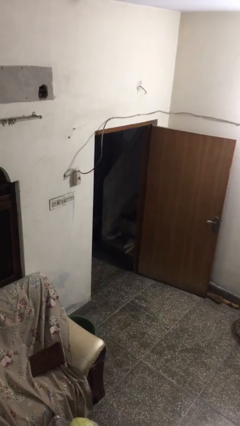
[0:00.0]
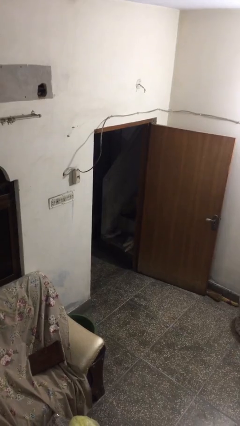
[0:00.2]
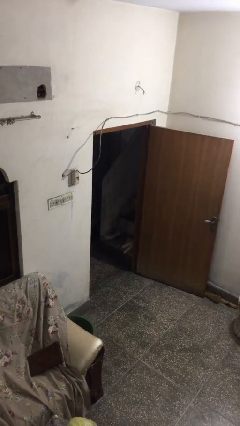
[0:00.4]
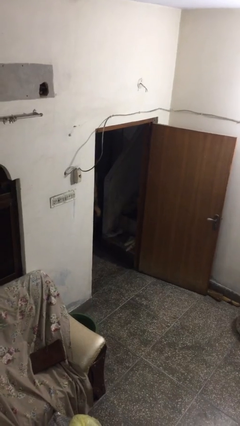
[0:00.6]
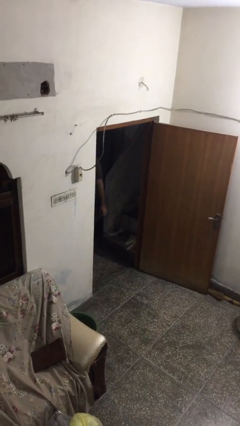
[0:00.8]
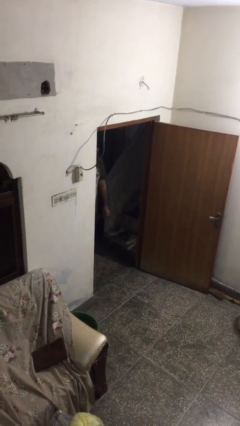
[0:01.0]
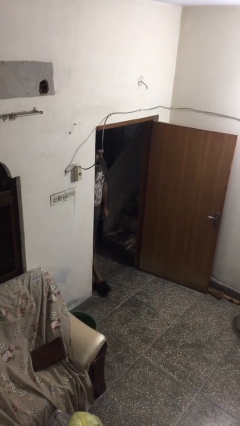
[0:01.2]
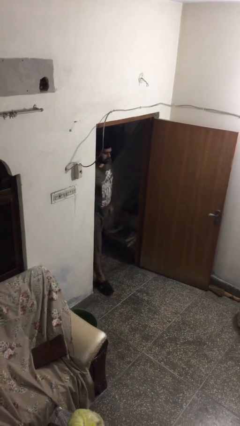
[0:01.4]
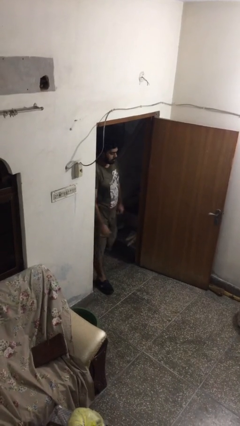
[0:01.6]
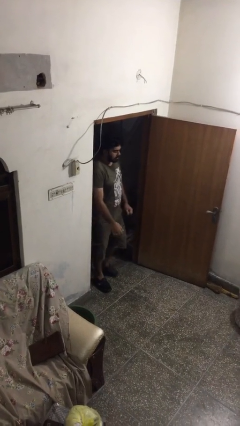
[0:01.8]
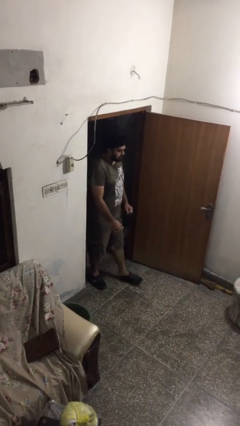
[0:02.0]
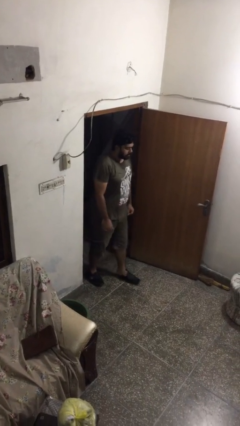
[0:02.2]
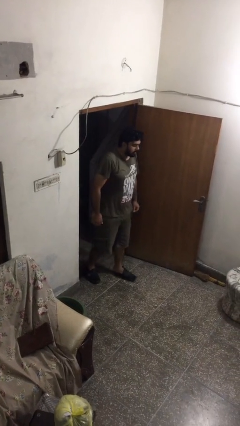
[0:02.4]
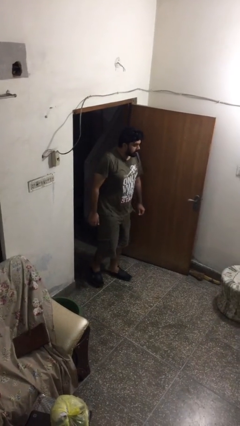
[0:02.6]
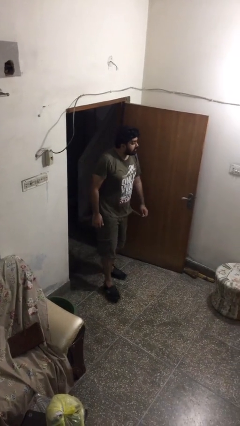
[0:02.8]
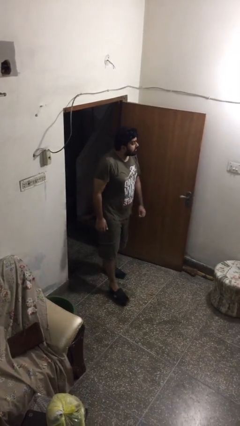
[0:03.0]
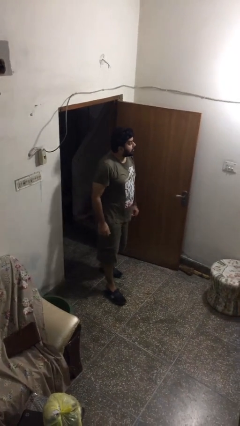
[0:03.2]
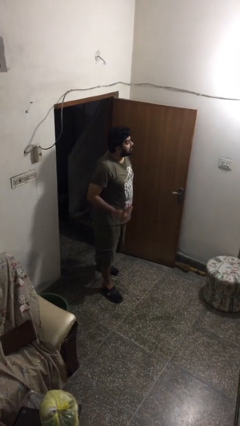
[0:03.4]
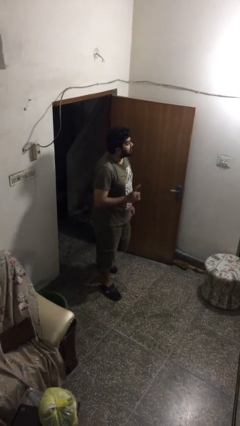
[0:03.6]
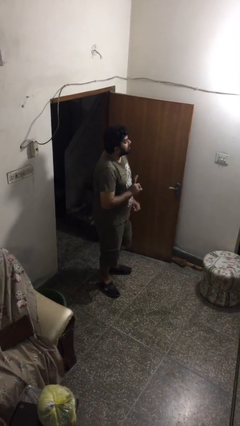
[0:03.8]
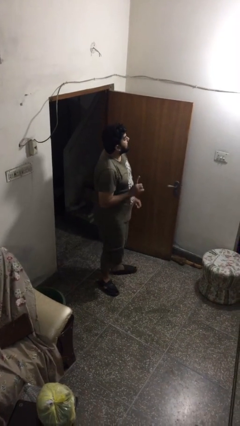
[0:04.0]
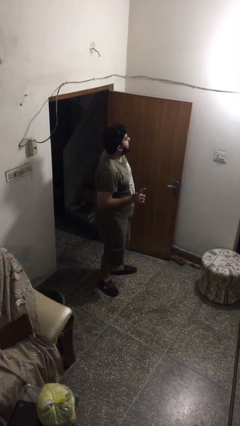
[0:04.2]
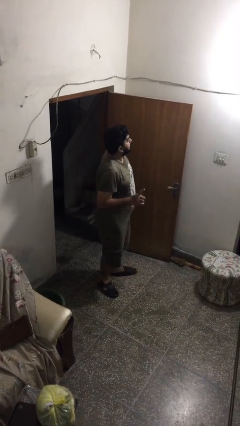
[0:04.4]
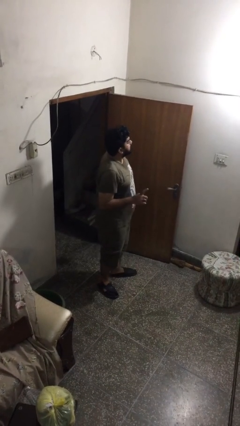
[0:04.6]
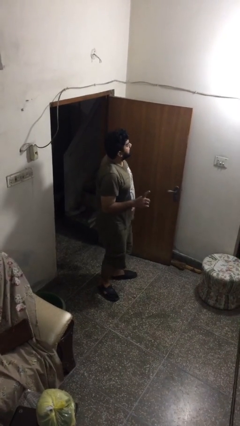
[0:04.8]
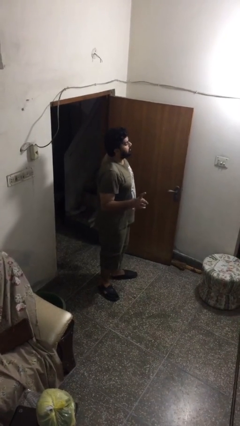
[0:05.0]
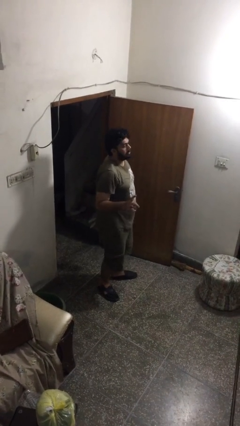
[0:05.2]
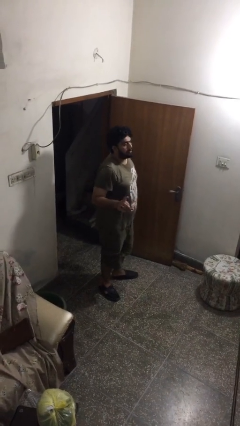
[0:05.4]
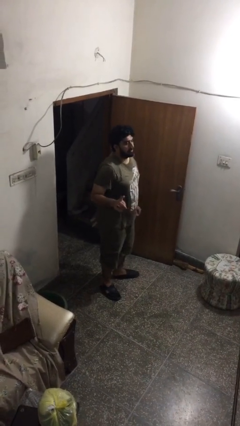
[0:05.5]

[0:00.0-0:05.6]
person enters scene through structure

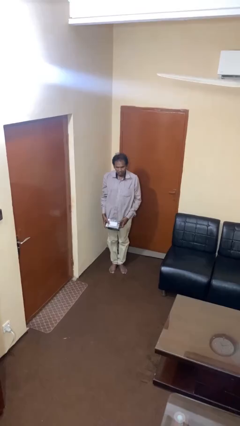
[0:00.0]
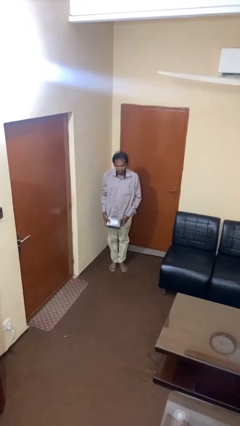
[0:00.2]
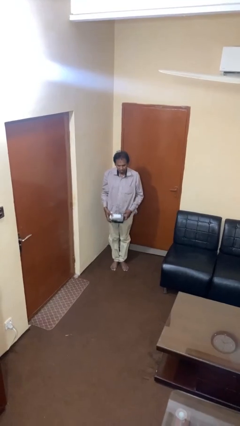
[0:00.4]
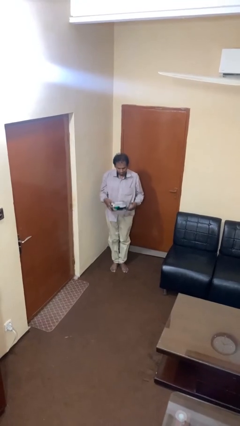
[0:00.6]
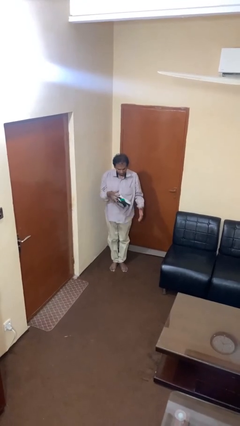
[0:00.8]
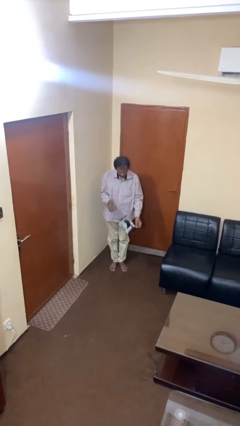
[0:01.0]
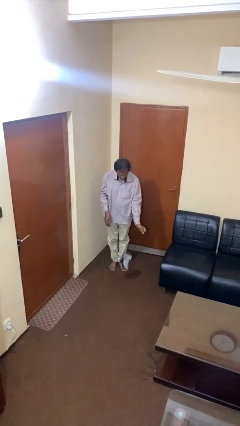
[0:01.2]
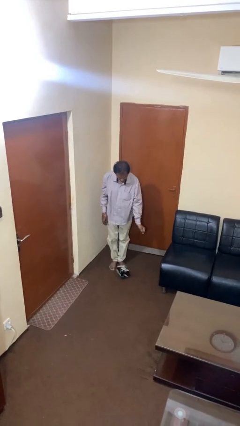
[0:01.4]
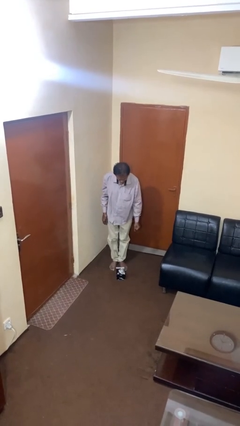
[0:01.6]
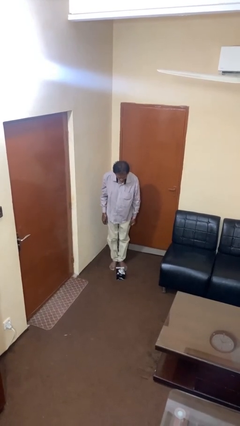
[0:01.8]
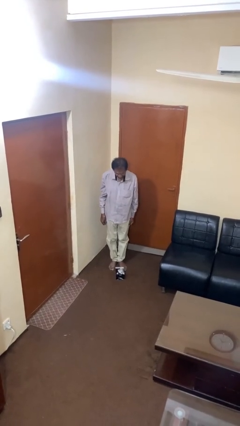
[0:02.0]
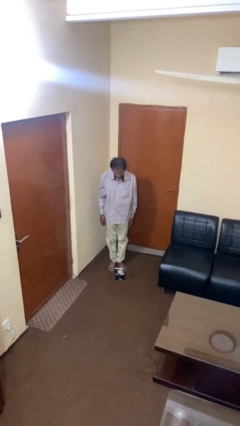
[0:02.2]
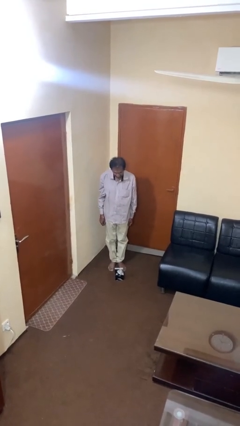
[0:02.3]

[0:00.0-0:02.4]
person drops object

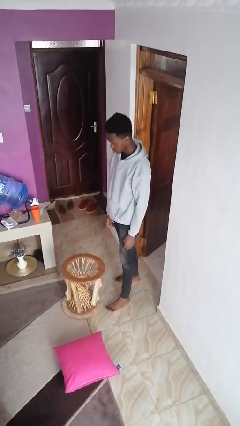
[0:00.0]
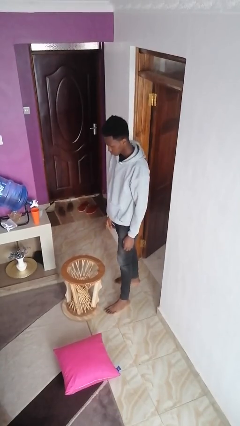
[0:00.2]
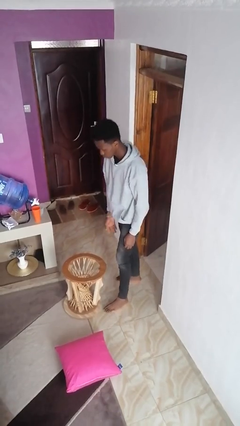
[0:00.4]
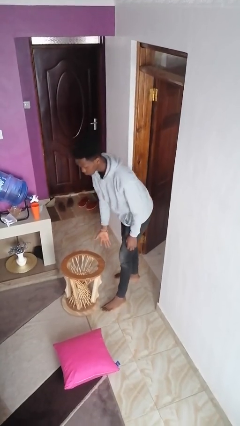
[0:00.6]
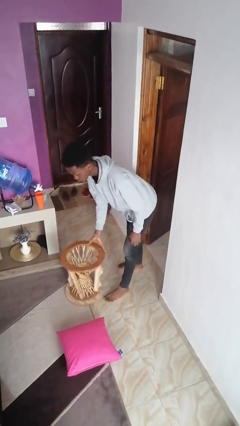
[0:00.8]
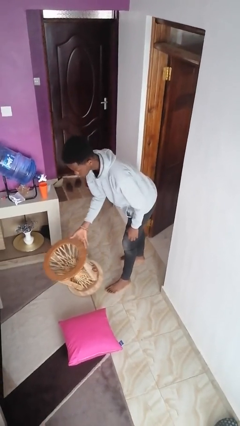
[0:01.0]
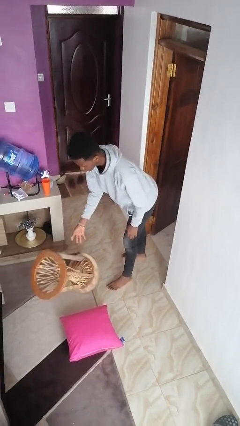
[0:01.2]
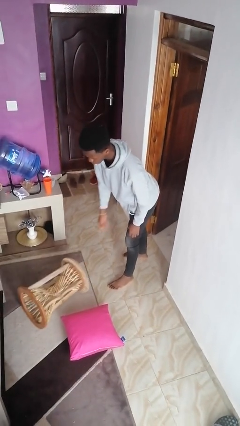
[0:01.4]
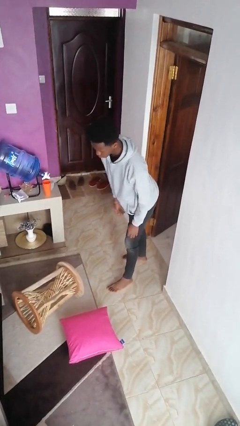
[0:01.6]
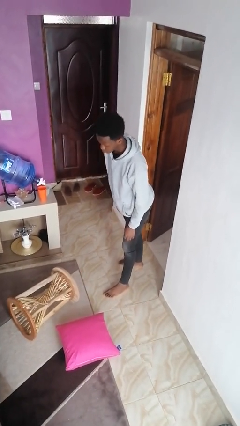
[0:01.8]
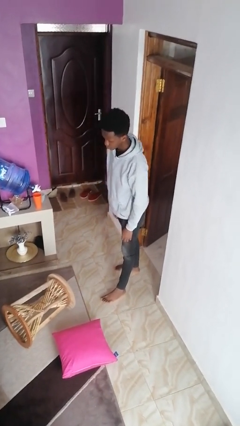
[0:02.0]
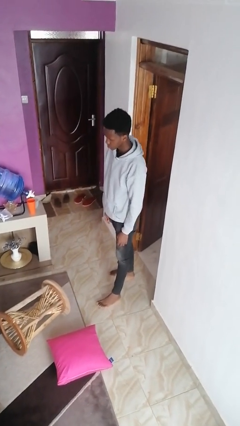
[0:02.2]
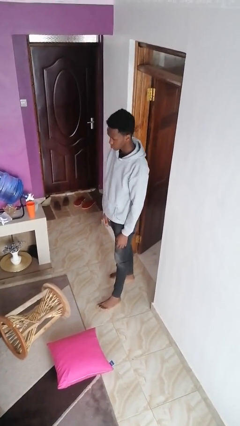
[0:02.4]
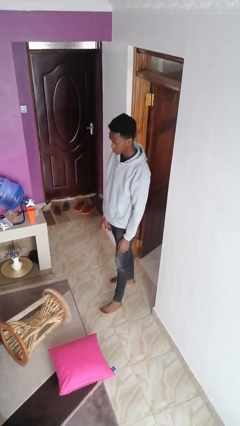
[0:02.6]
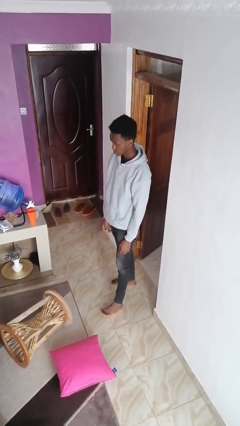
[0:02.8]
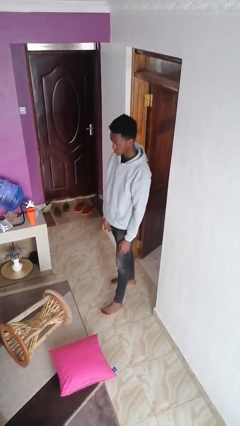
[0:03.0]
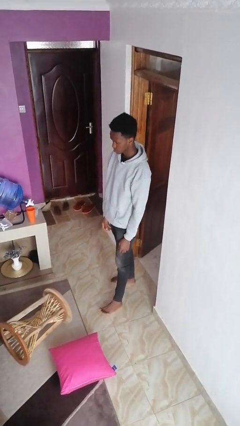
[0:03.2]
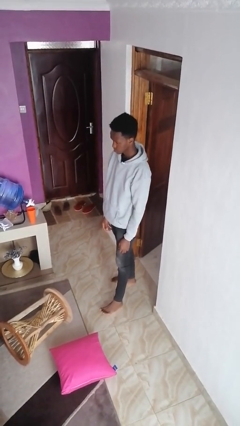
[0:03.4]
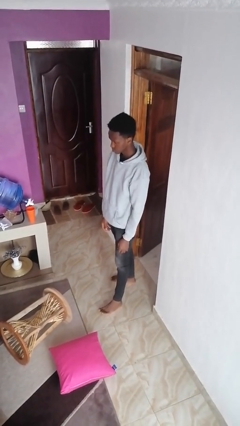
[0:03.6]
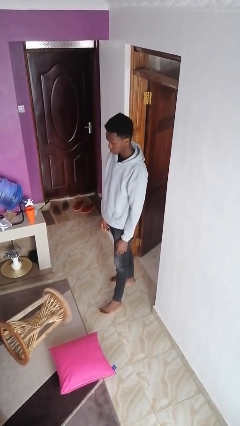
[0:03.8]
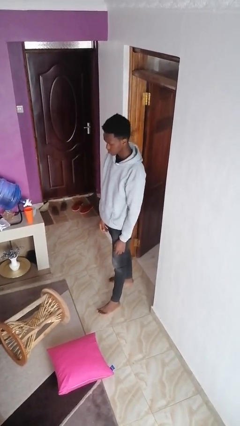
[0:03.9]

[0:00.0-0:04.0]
person knocks over furniture

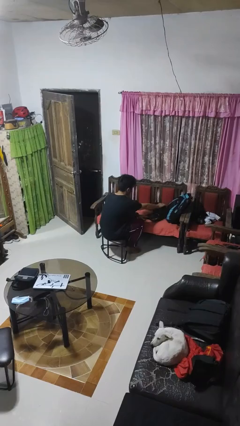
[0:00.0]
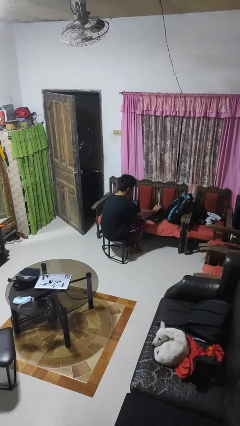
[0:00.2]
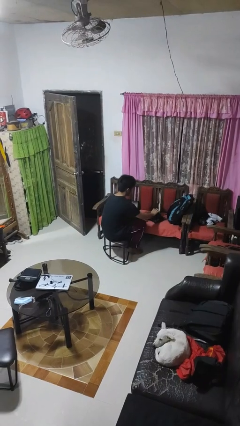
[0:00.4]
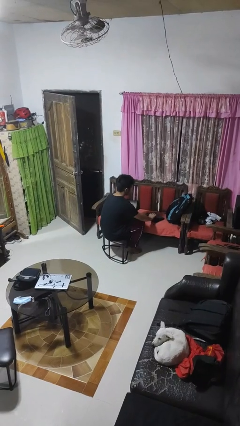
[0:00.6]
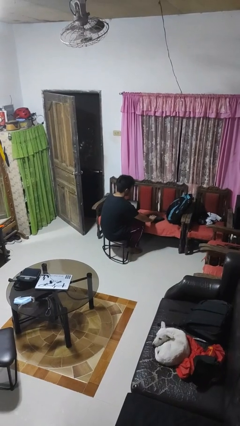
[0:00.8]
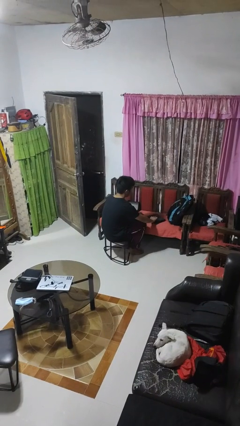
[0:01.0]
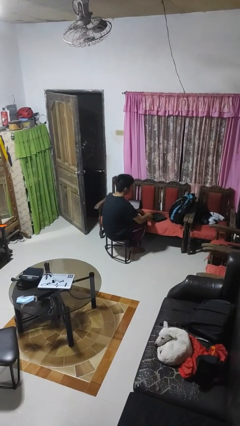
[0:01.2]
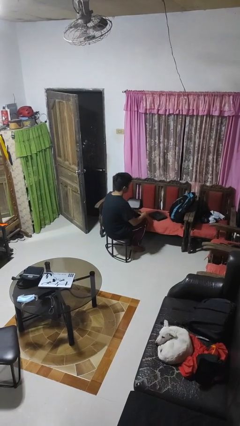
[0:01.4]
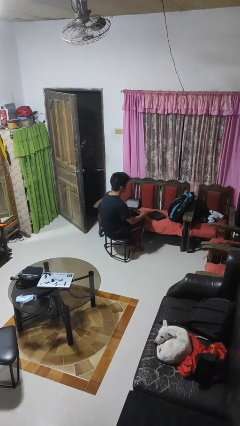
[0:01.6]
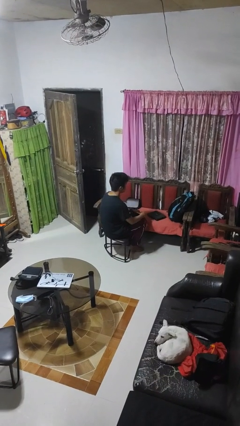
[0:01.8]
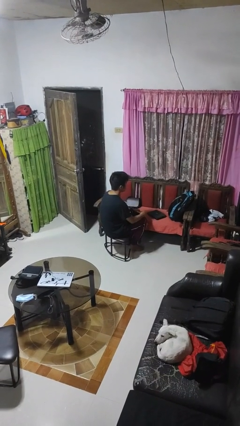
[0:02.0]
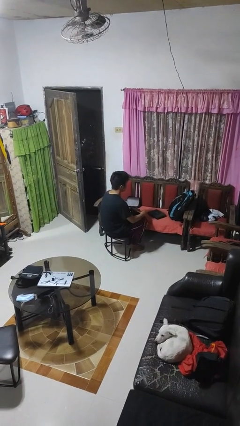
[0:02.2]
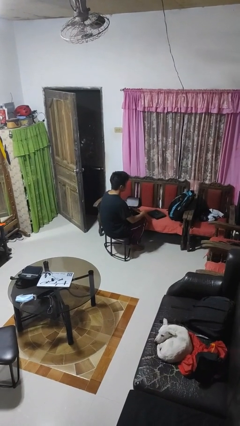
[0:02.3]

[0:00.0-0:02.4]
person closes laptop

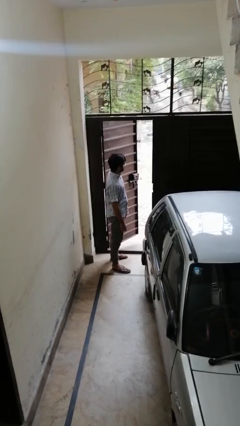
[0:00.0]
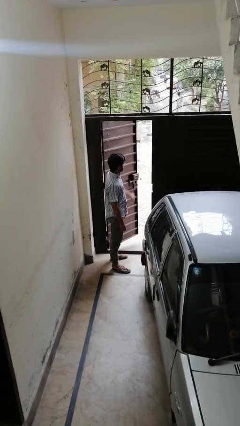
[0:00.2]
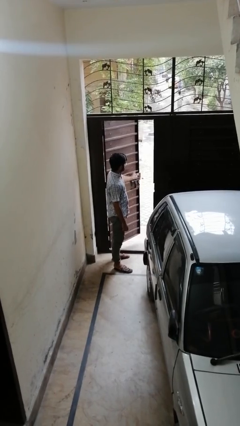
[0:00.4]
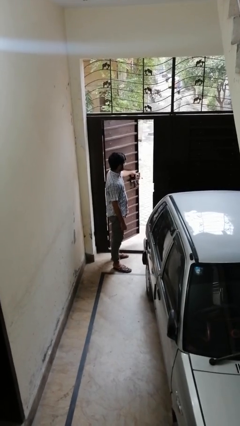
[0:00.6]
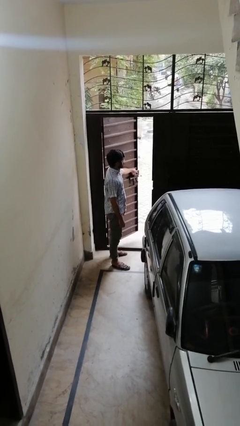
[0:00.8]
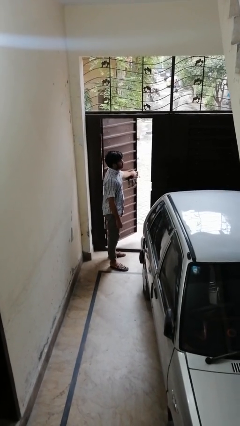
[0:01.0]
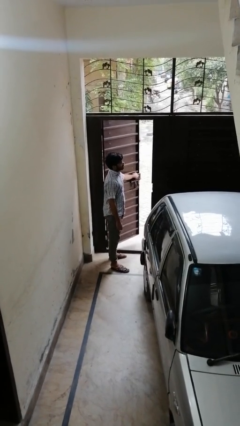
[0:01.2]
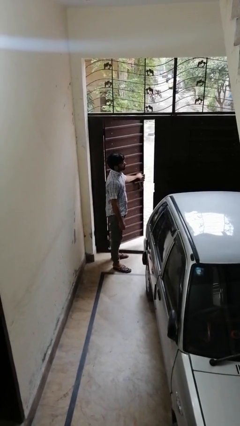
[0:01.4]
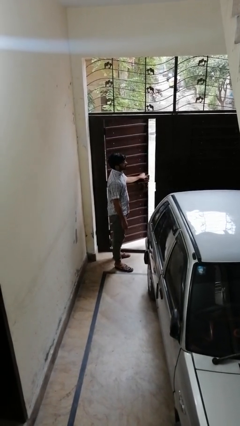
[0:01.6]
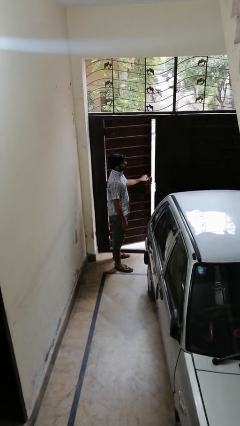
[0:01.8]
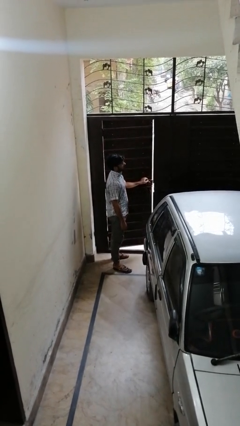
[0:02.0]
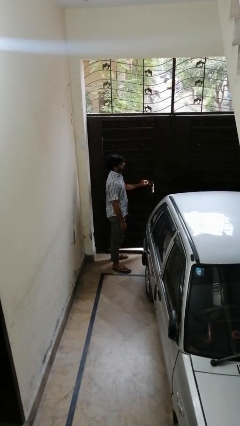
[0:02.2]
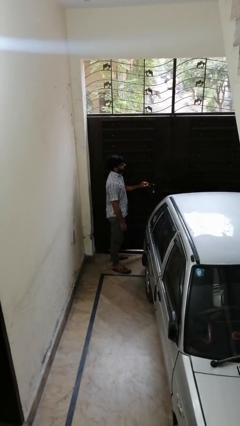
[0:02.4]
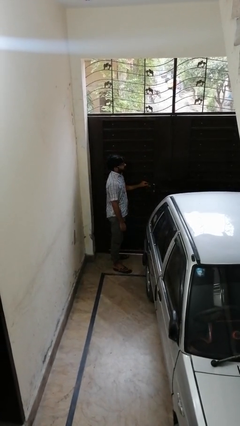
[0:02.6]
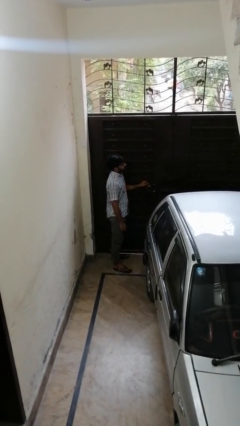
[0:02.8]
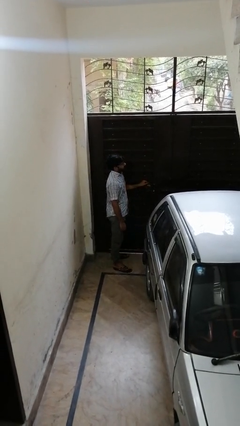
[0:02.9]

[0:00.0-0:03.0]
person closes gate
